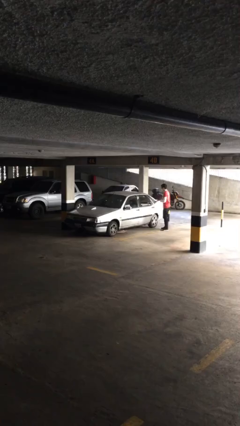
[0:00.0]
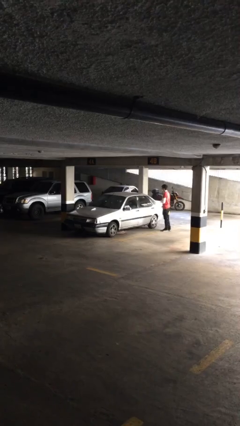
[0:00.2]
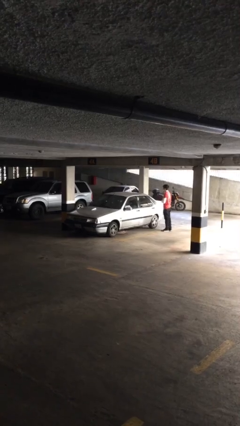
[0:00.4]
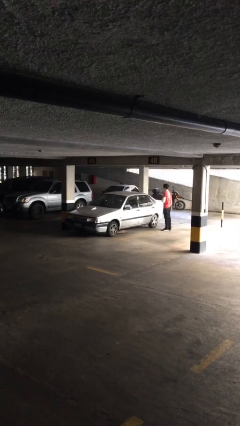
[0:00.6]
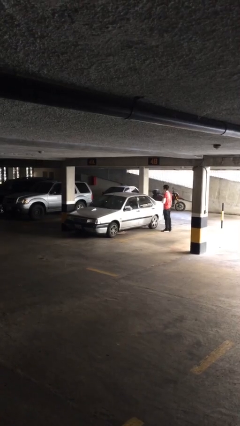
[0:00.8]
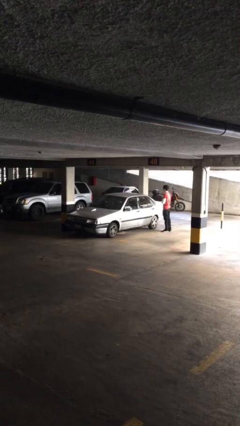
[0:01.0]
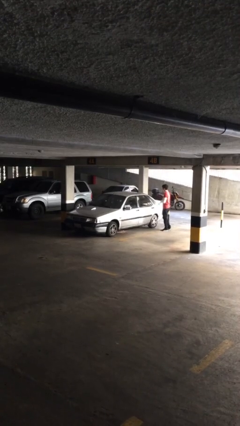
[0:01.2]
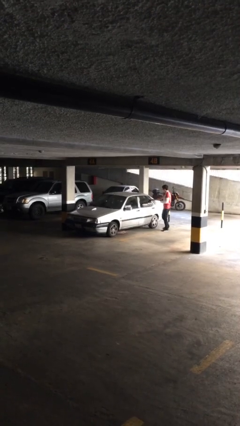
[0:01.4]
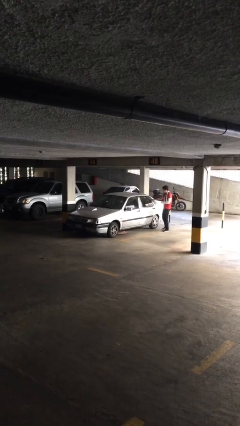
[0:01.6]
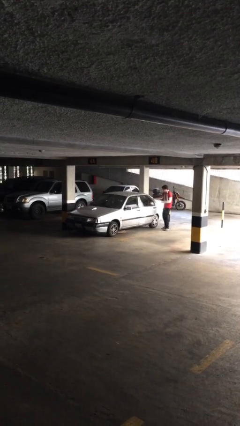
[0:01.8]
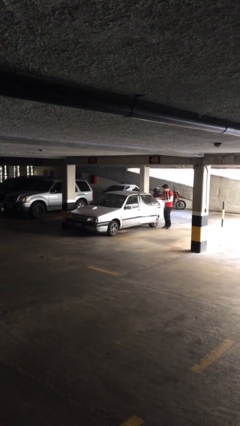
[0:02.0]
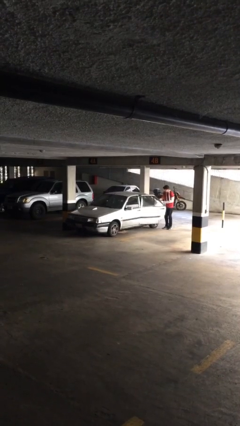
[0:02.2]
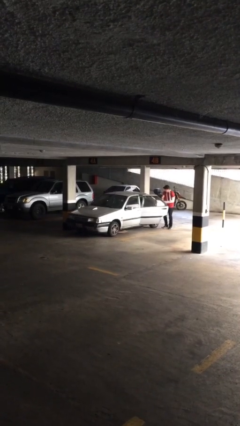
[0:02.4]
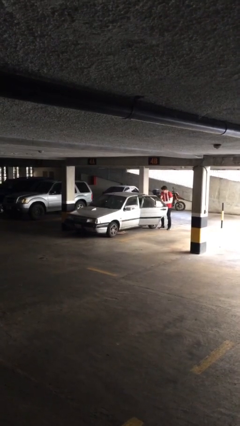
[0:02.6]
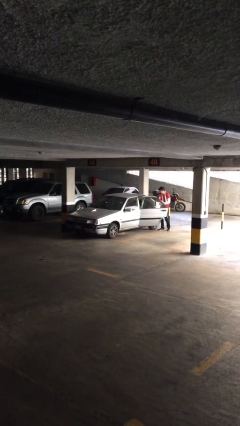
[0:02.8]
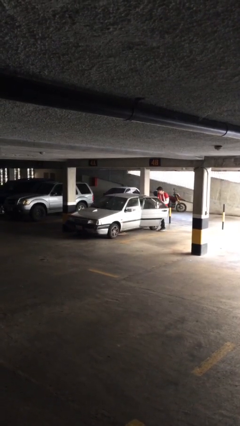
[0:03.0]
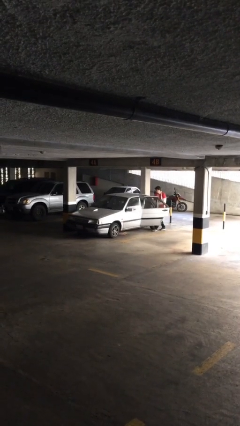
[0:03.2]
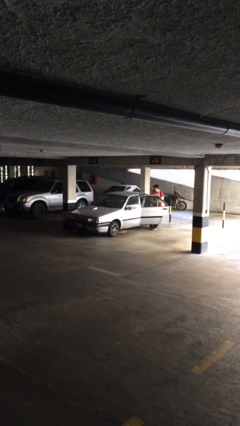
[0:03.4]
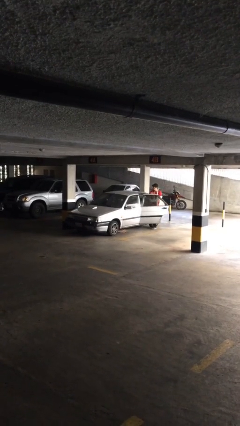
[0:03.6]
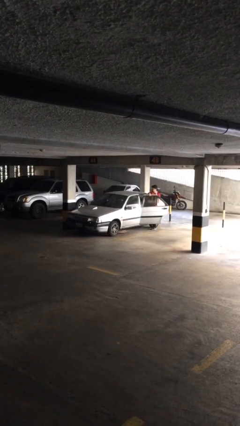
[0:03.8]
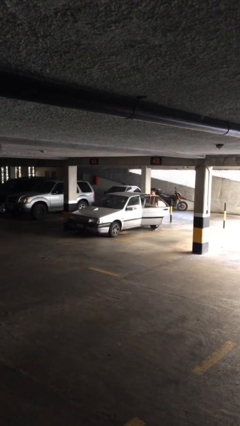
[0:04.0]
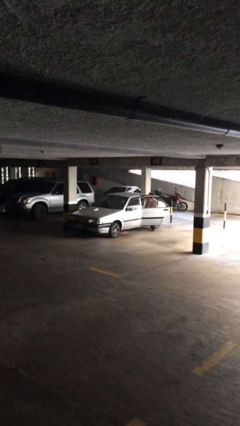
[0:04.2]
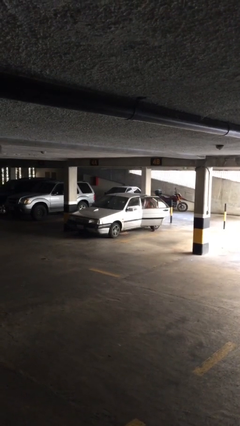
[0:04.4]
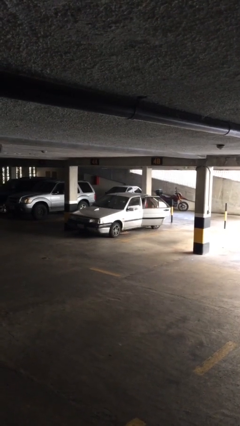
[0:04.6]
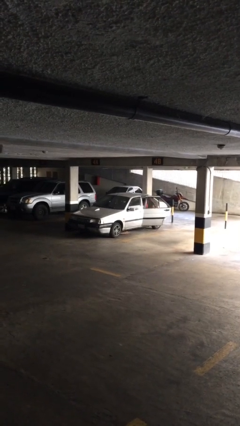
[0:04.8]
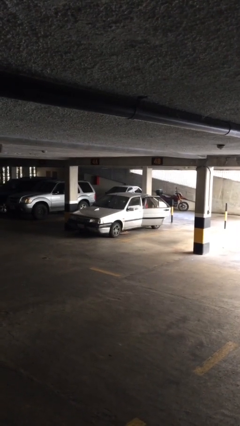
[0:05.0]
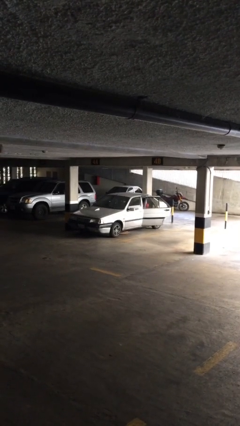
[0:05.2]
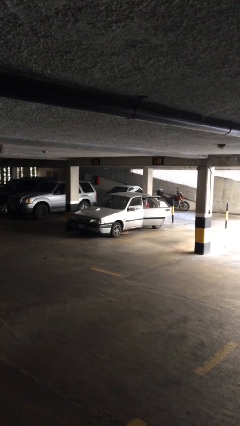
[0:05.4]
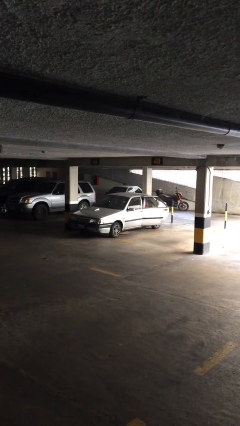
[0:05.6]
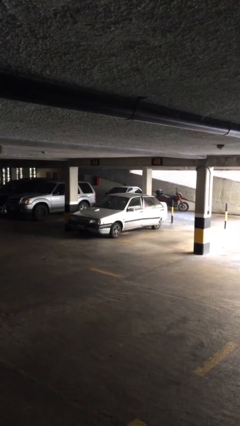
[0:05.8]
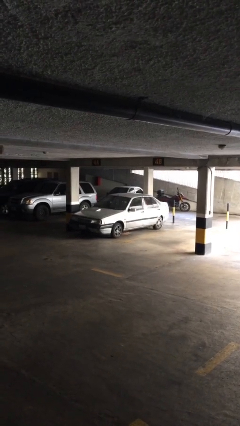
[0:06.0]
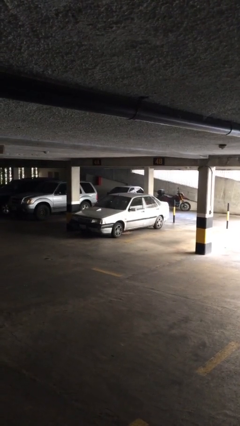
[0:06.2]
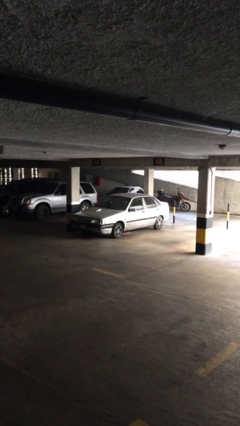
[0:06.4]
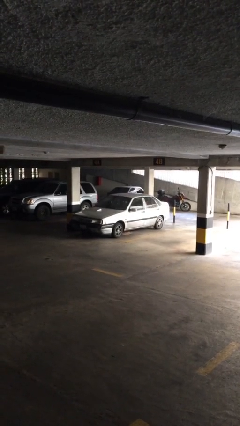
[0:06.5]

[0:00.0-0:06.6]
car picks up person

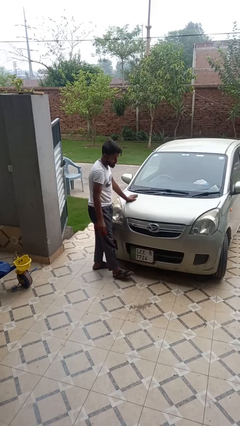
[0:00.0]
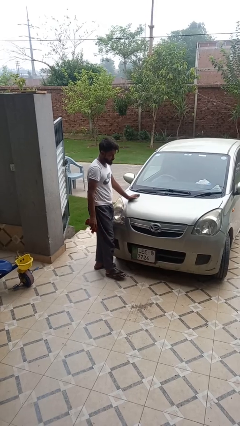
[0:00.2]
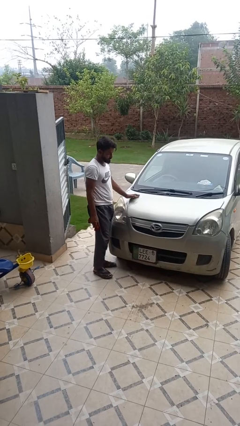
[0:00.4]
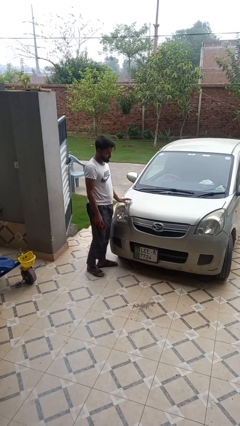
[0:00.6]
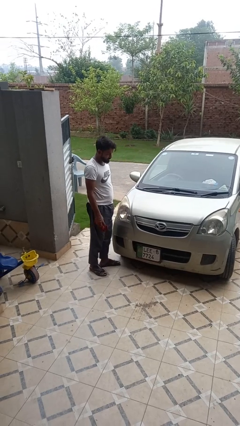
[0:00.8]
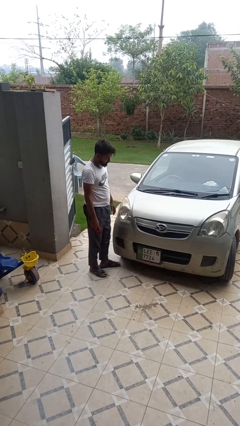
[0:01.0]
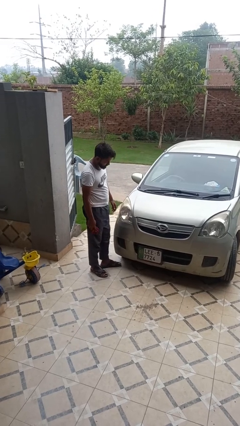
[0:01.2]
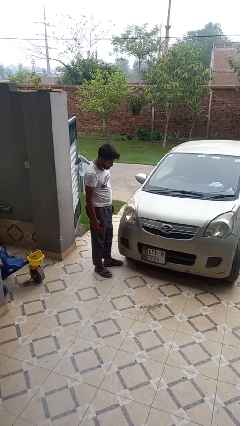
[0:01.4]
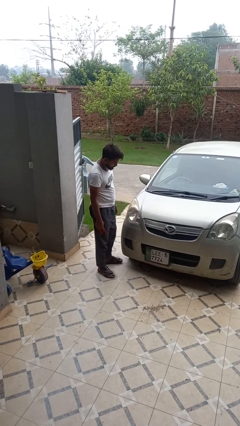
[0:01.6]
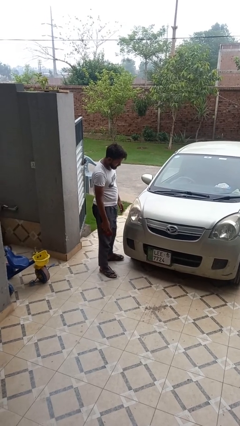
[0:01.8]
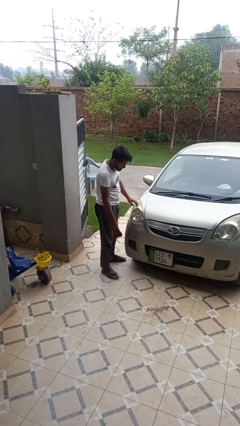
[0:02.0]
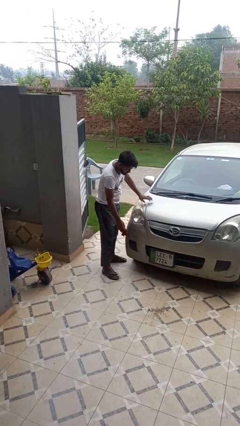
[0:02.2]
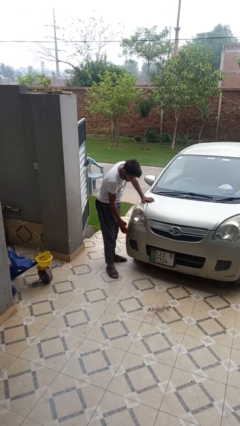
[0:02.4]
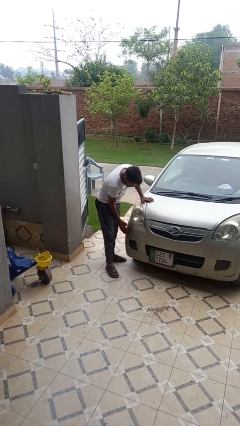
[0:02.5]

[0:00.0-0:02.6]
person polishes car with rag

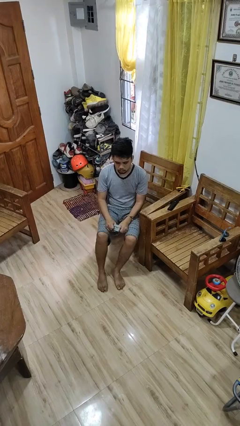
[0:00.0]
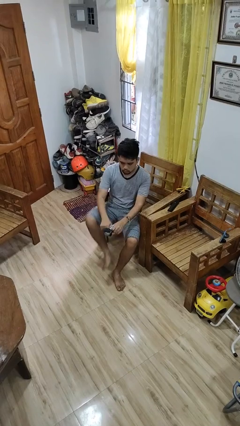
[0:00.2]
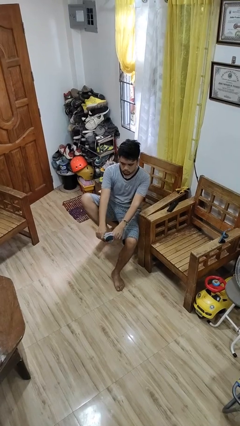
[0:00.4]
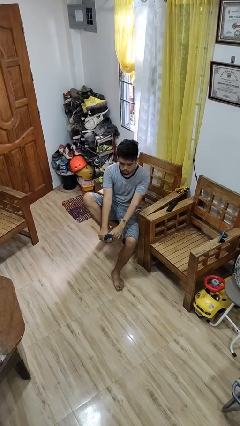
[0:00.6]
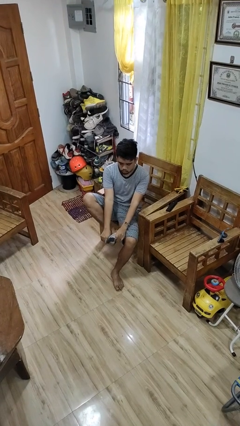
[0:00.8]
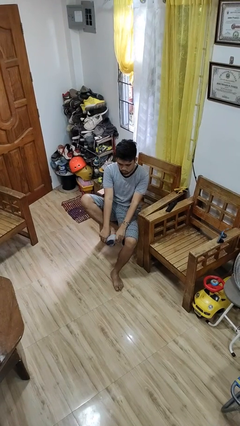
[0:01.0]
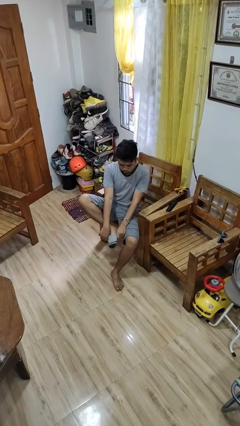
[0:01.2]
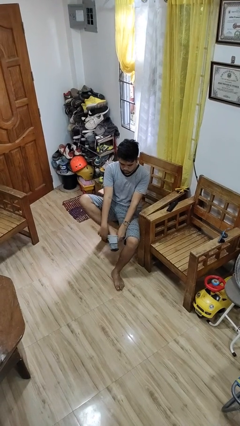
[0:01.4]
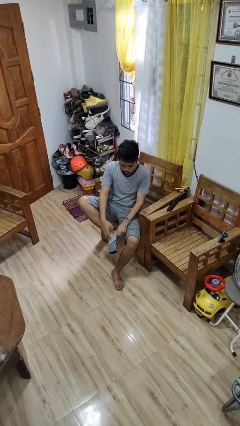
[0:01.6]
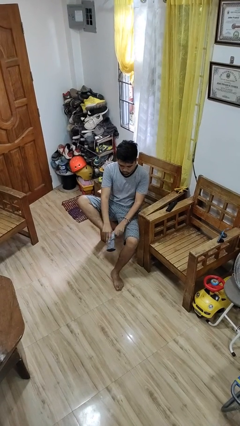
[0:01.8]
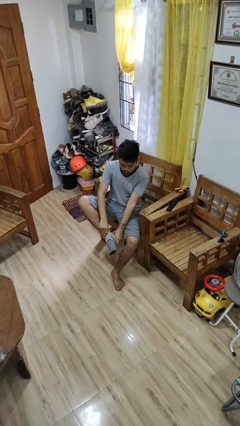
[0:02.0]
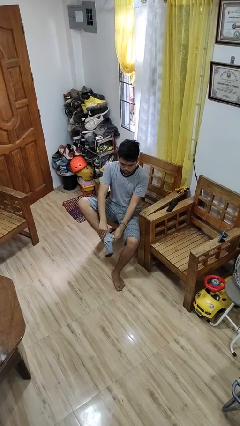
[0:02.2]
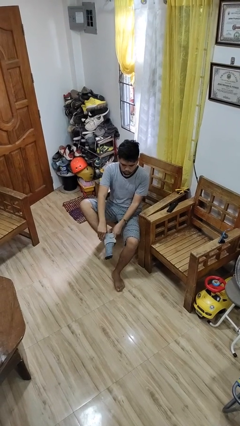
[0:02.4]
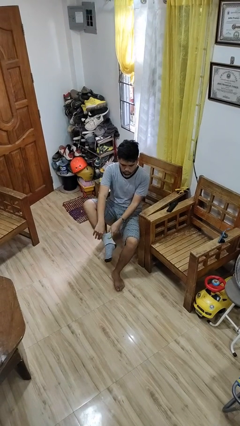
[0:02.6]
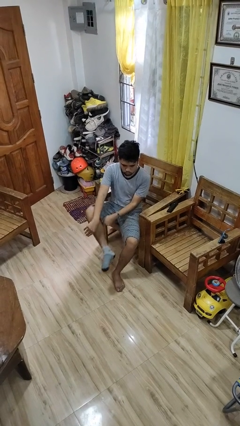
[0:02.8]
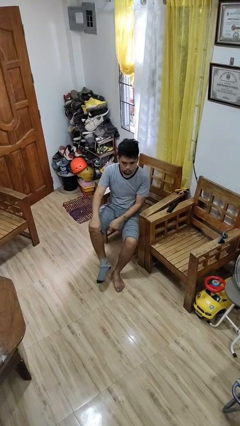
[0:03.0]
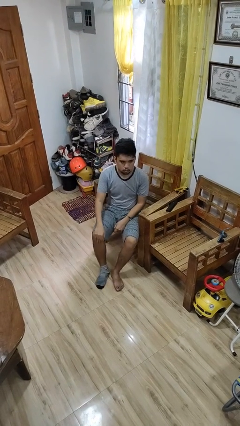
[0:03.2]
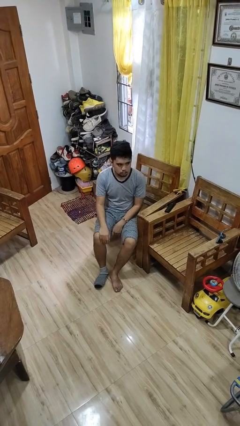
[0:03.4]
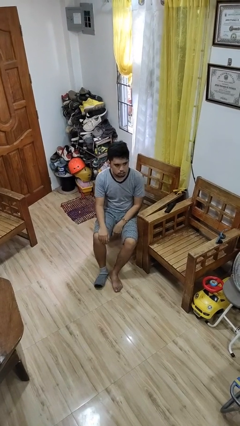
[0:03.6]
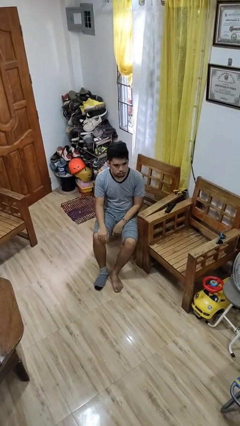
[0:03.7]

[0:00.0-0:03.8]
person puts on socks

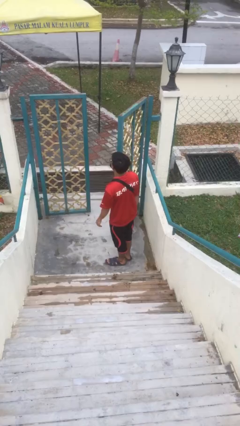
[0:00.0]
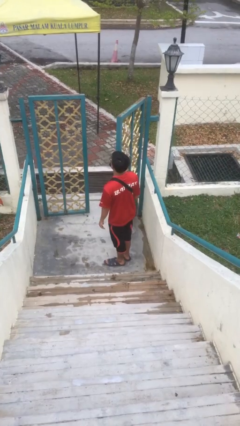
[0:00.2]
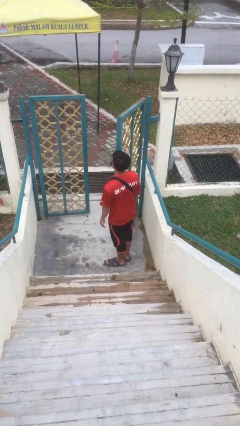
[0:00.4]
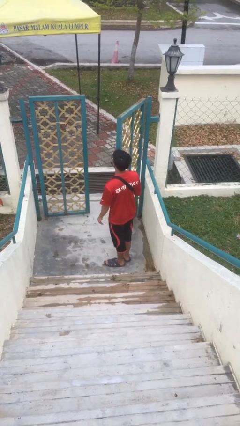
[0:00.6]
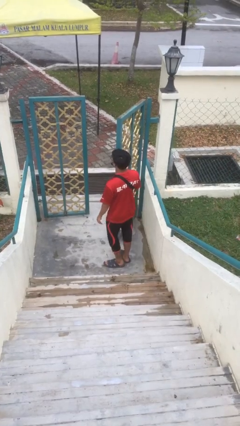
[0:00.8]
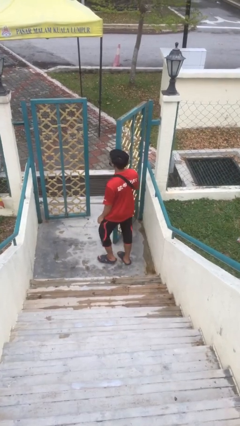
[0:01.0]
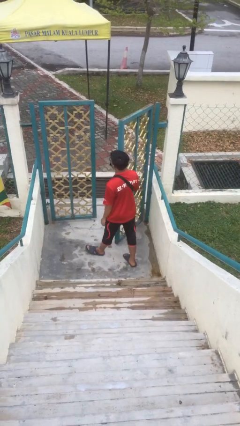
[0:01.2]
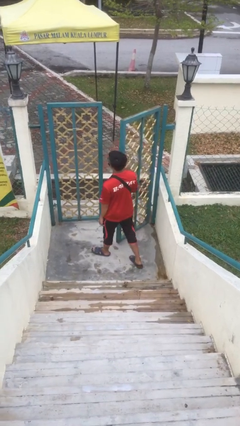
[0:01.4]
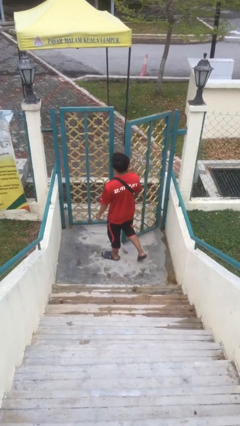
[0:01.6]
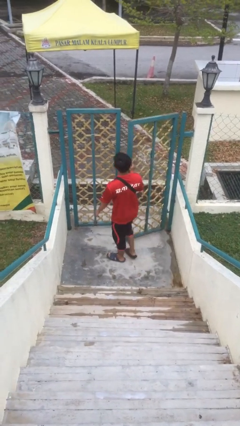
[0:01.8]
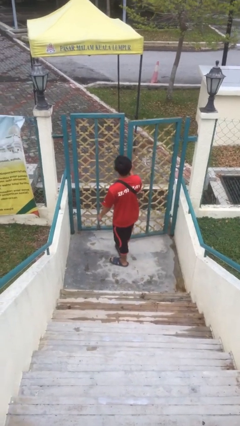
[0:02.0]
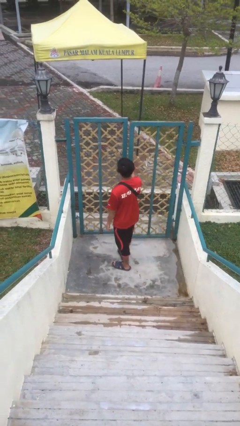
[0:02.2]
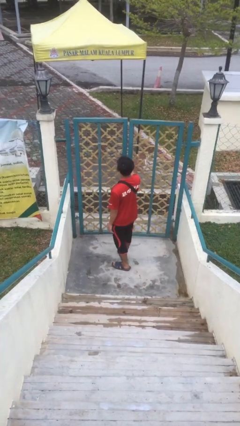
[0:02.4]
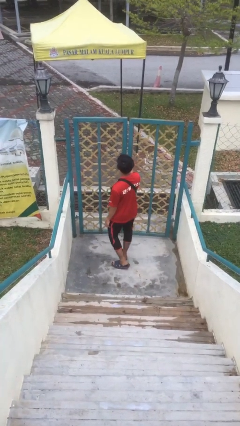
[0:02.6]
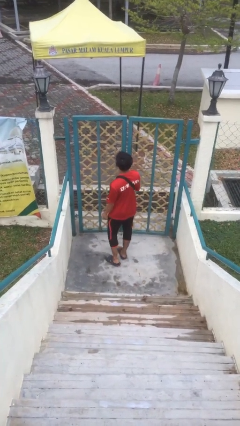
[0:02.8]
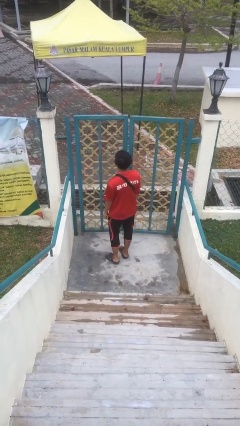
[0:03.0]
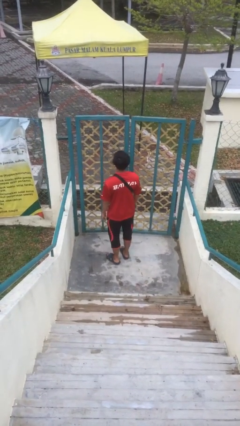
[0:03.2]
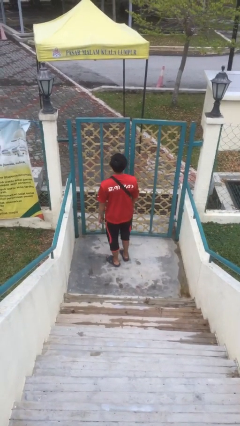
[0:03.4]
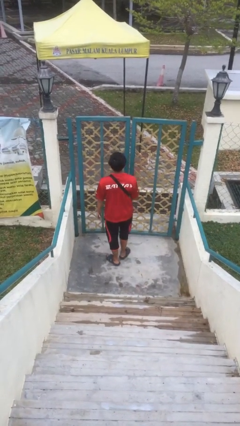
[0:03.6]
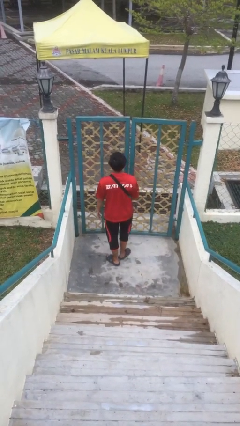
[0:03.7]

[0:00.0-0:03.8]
person closes facility door

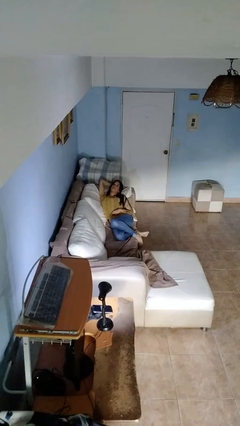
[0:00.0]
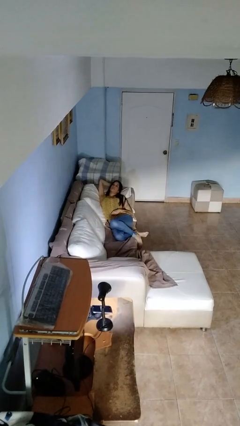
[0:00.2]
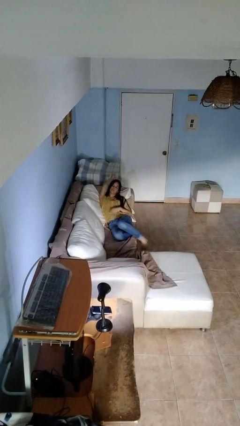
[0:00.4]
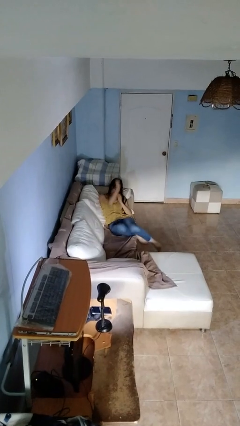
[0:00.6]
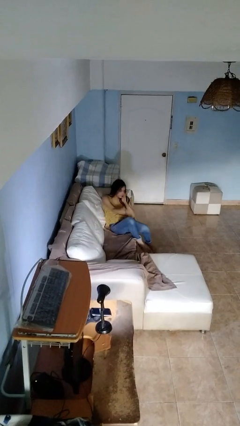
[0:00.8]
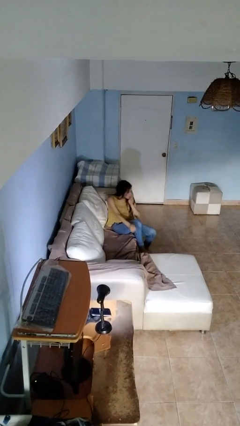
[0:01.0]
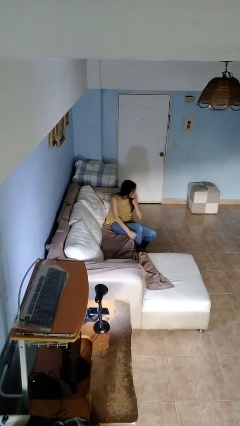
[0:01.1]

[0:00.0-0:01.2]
person stands up
